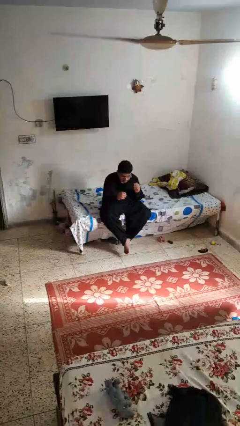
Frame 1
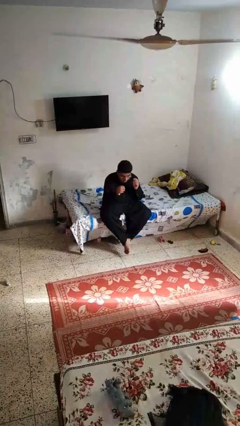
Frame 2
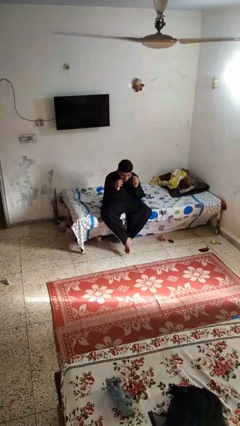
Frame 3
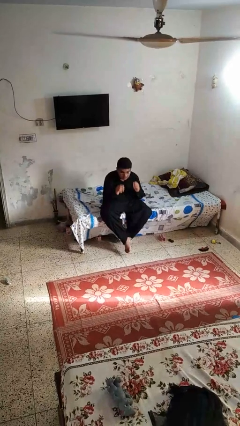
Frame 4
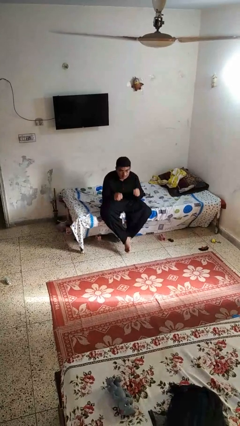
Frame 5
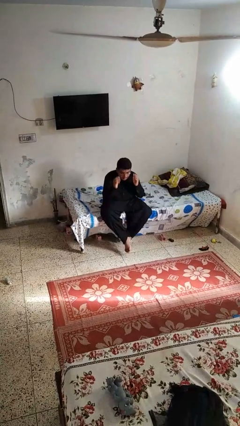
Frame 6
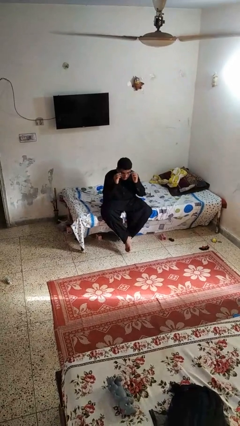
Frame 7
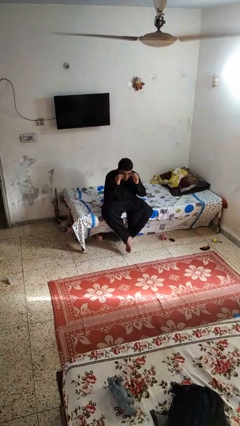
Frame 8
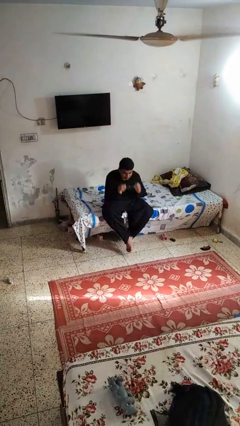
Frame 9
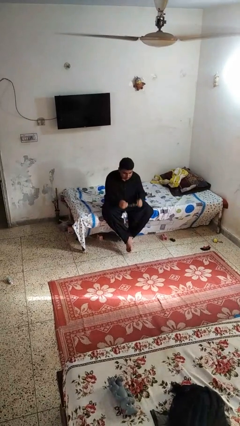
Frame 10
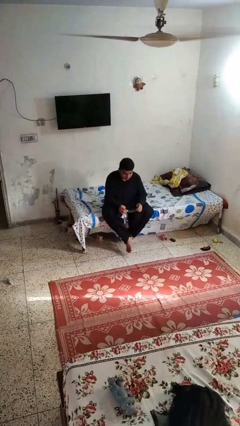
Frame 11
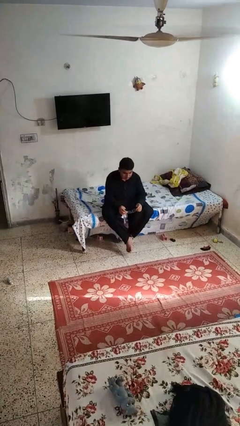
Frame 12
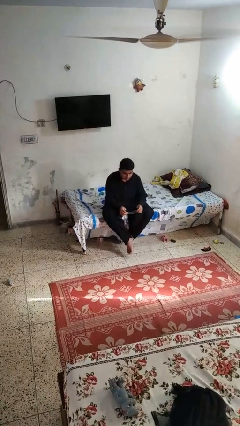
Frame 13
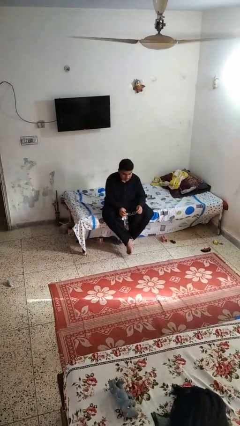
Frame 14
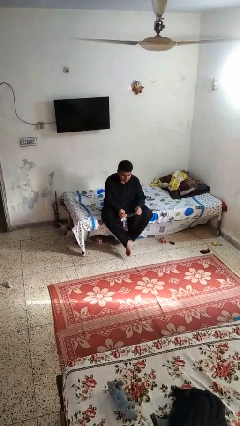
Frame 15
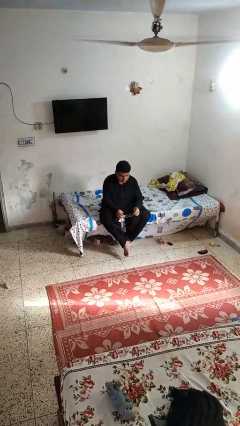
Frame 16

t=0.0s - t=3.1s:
person takes off glasses

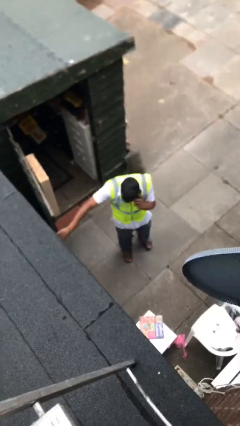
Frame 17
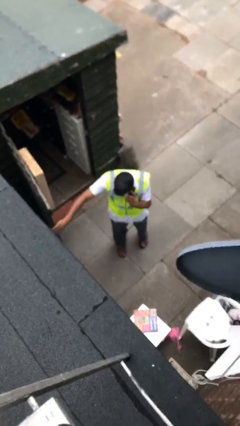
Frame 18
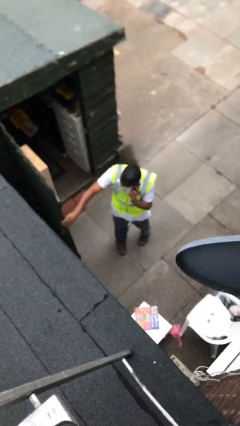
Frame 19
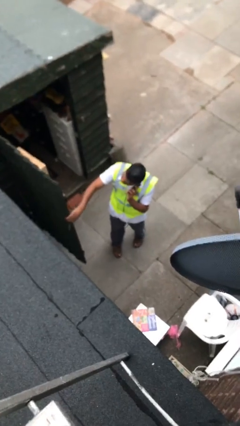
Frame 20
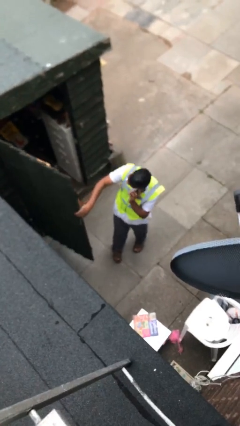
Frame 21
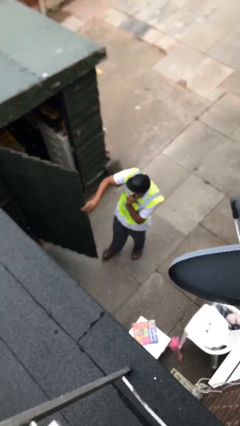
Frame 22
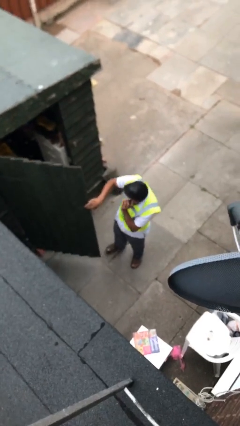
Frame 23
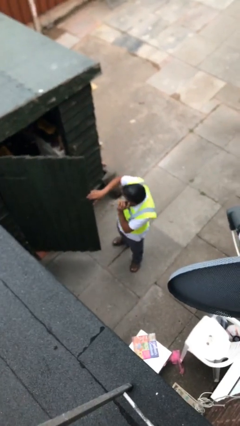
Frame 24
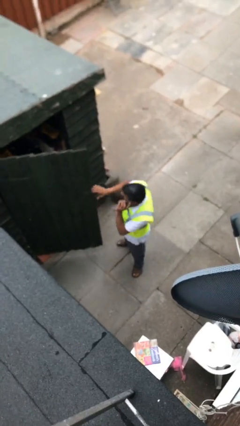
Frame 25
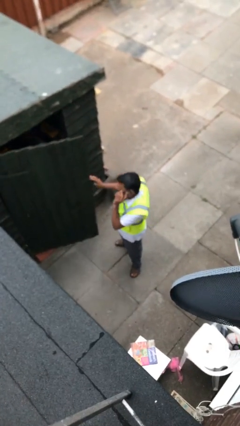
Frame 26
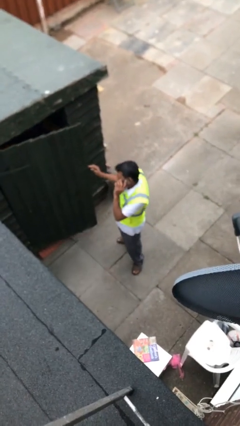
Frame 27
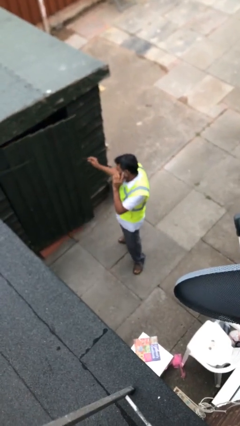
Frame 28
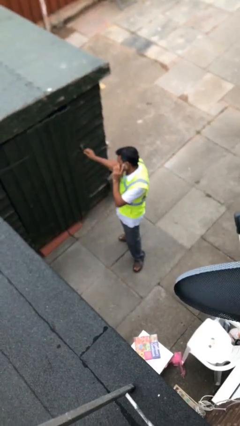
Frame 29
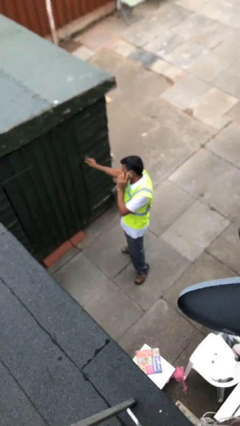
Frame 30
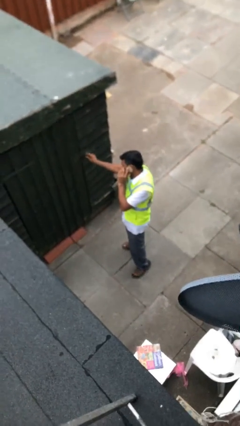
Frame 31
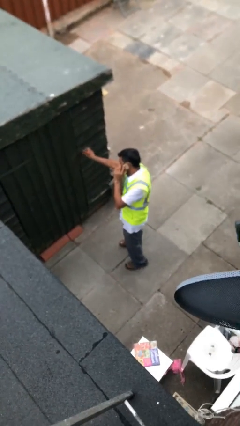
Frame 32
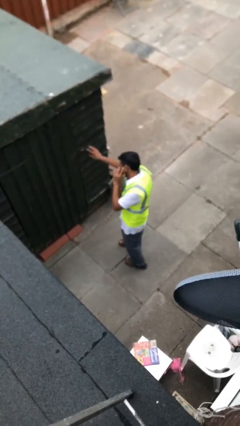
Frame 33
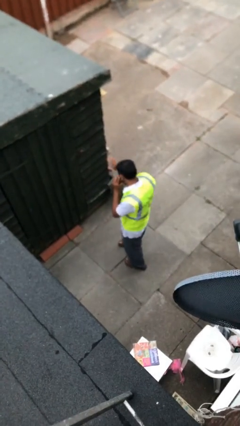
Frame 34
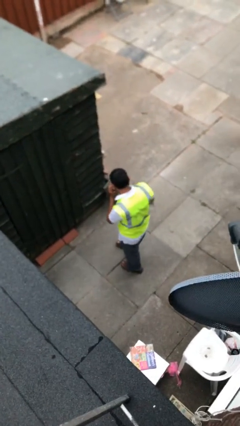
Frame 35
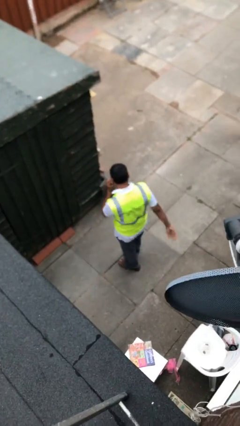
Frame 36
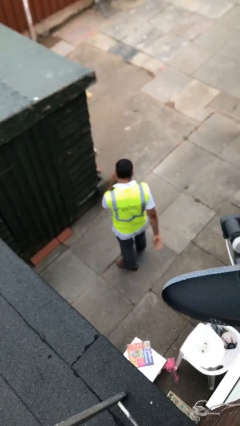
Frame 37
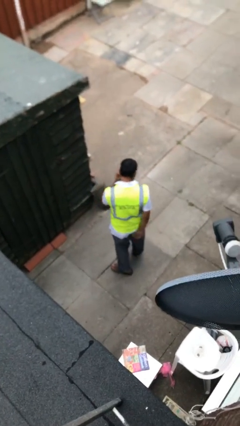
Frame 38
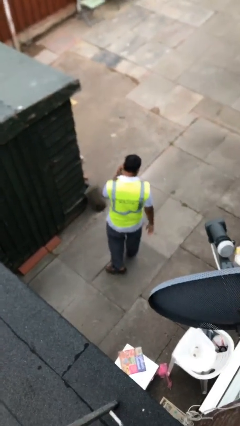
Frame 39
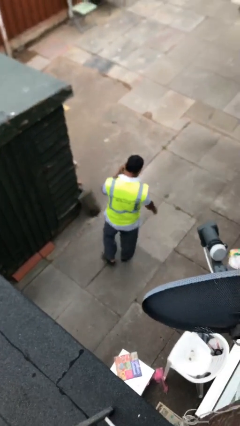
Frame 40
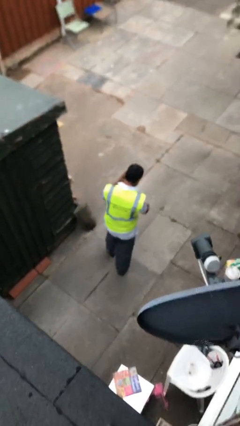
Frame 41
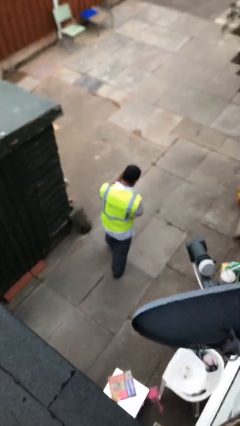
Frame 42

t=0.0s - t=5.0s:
person closes facility door

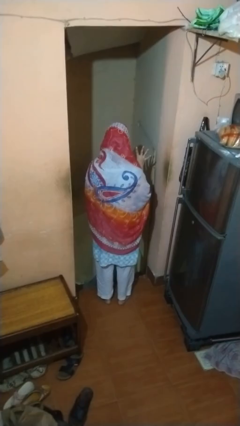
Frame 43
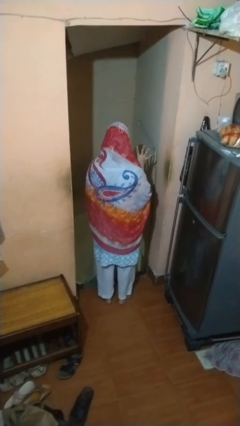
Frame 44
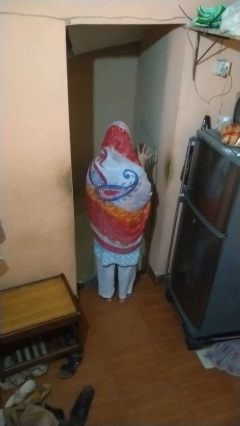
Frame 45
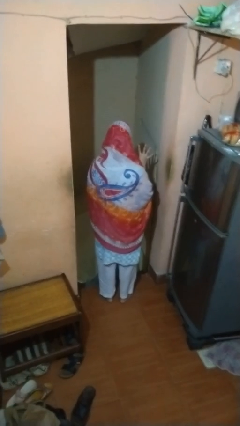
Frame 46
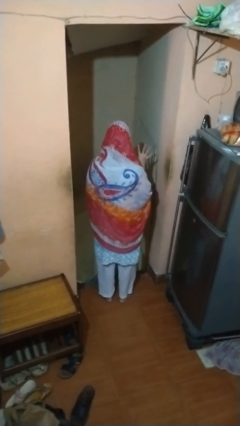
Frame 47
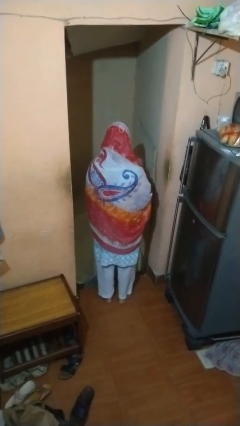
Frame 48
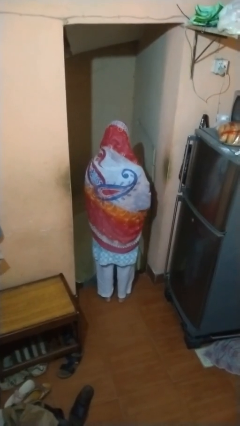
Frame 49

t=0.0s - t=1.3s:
person gestures number four

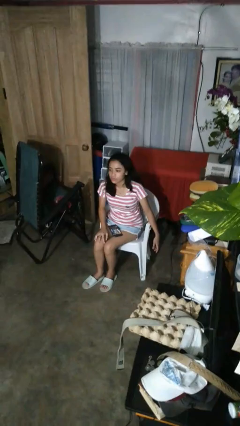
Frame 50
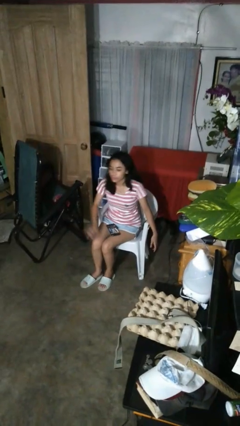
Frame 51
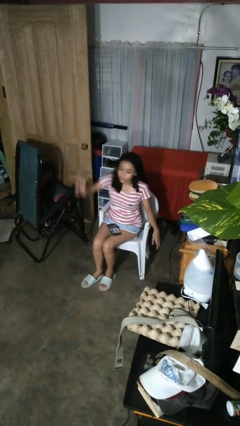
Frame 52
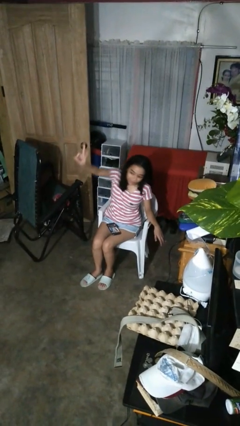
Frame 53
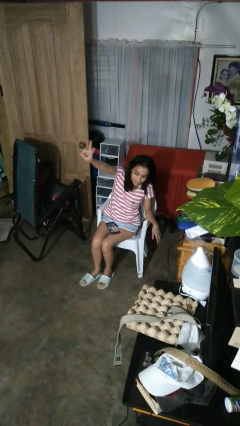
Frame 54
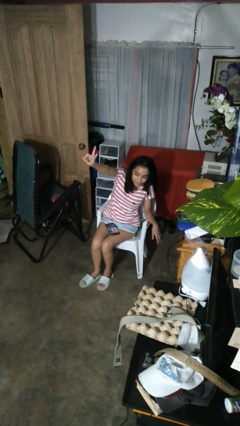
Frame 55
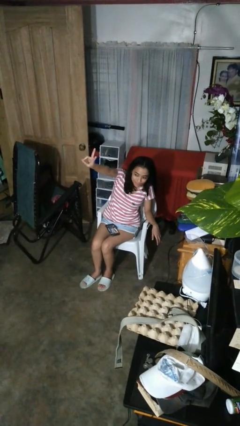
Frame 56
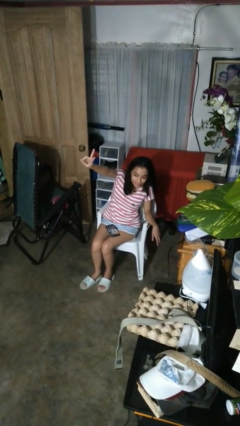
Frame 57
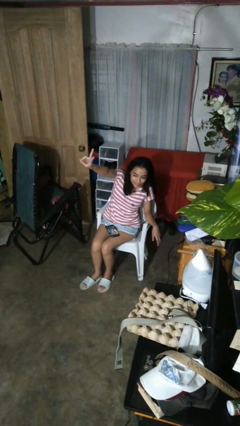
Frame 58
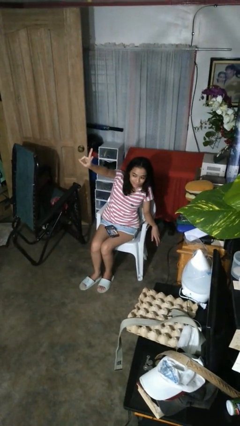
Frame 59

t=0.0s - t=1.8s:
person gestures peace

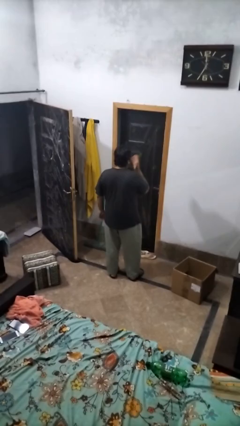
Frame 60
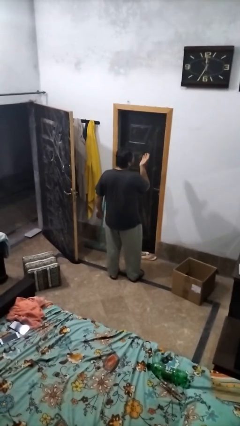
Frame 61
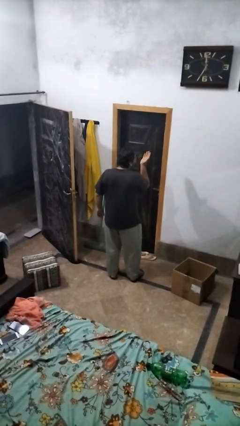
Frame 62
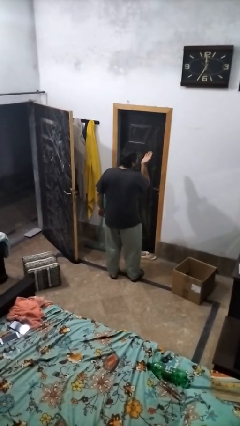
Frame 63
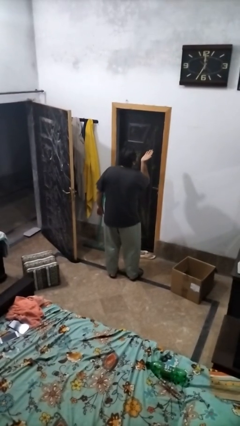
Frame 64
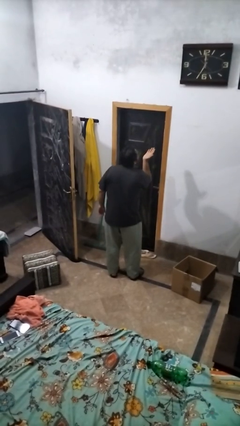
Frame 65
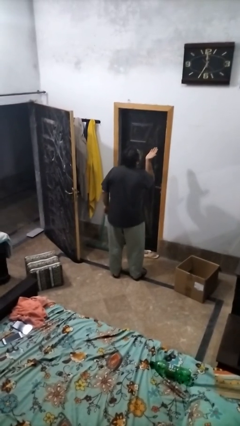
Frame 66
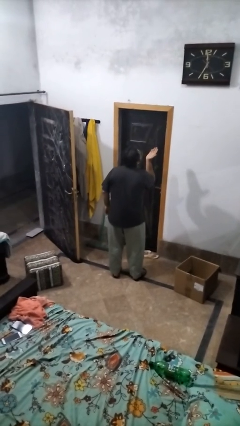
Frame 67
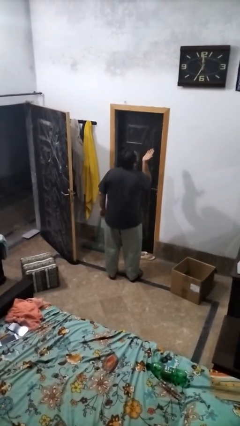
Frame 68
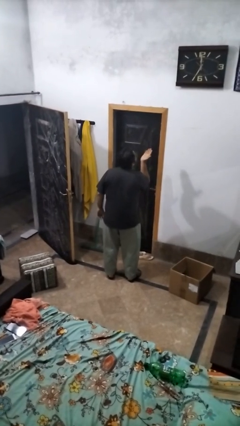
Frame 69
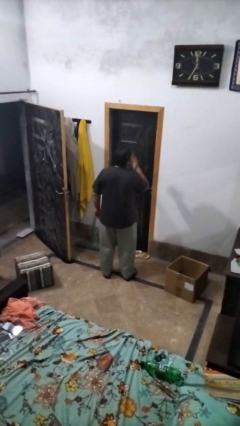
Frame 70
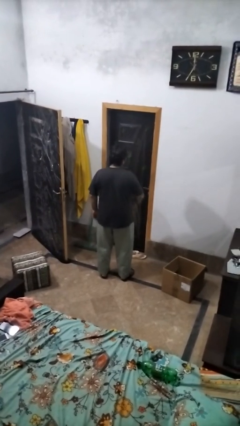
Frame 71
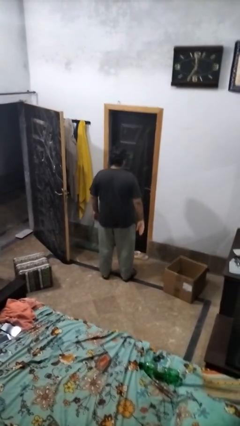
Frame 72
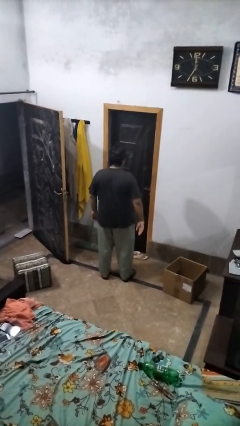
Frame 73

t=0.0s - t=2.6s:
person gestures blow kiss

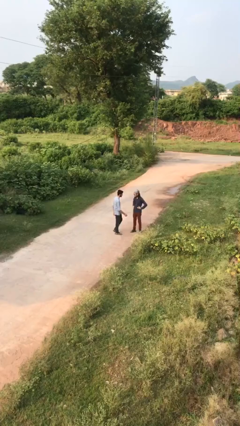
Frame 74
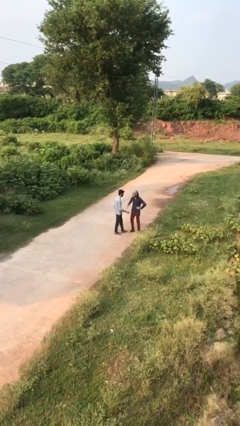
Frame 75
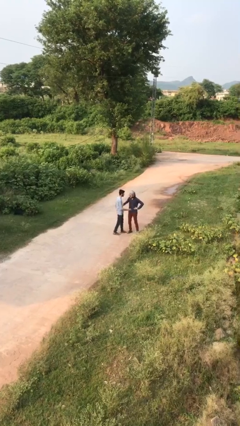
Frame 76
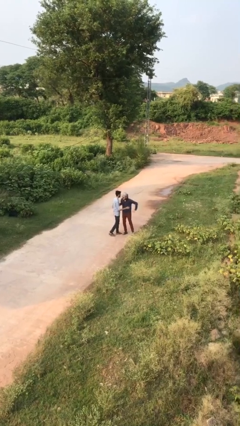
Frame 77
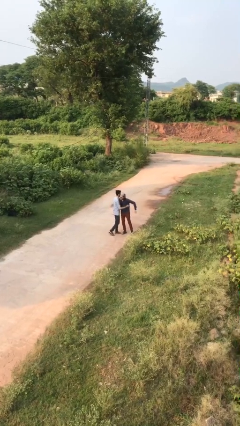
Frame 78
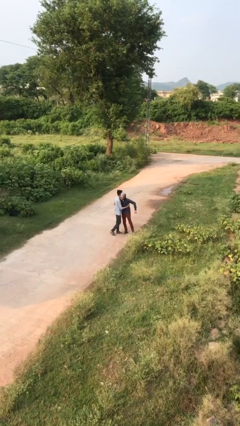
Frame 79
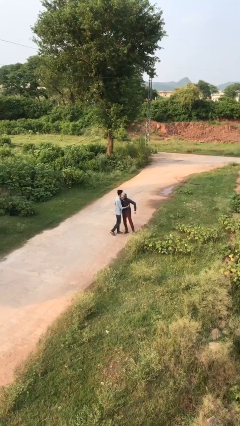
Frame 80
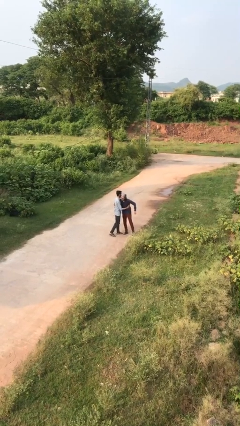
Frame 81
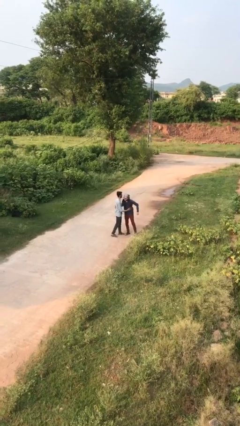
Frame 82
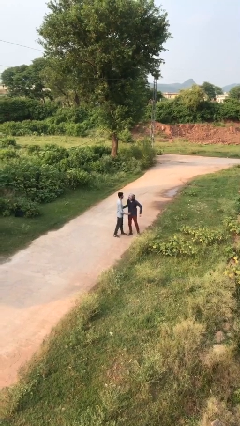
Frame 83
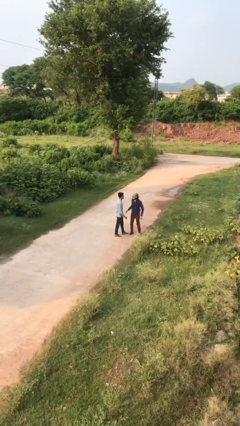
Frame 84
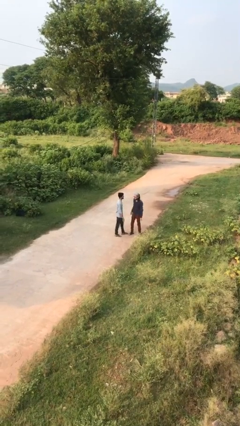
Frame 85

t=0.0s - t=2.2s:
person embraces person

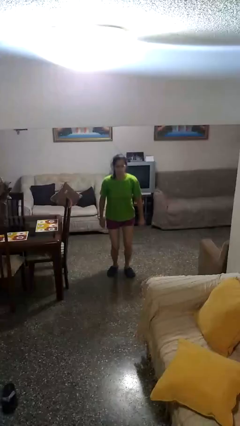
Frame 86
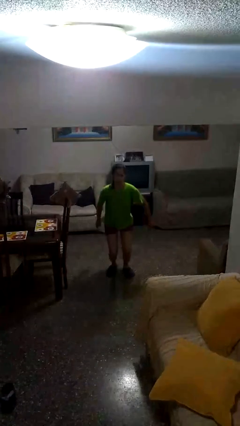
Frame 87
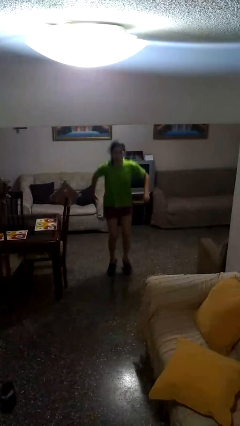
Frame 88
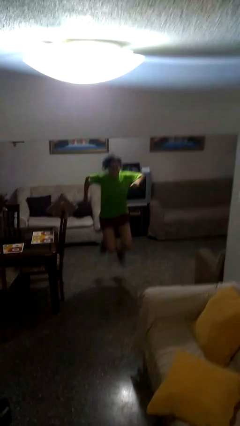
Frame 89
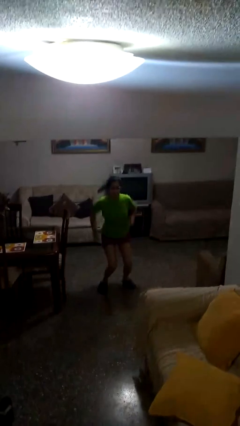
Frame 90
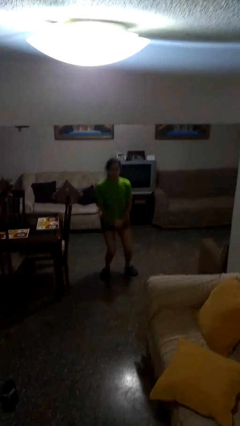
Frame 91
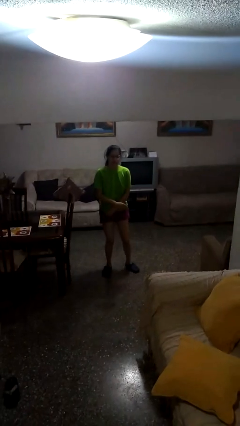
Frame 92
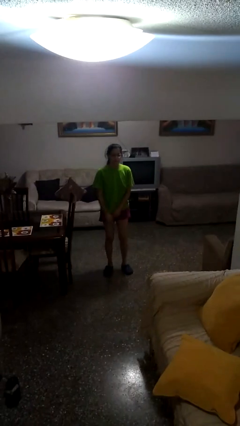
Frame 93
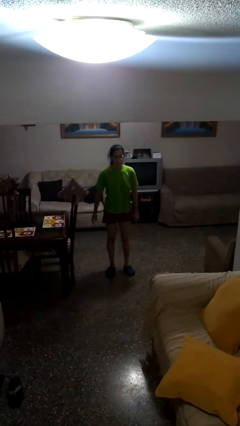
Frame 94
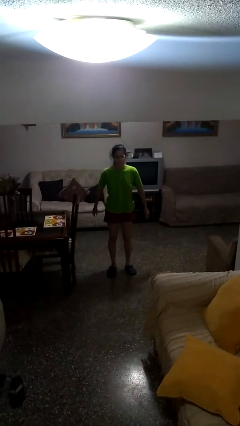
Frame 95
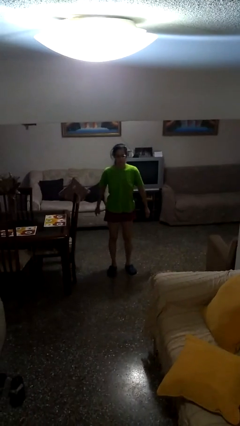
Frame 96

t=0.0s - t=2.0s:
person jumps
